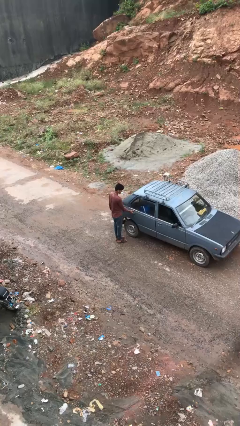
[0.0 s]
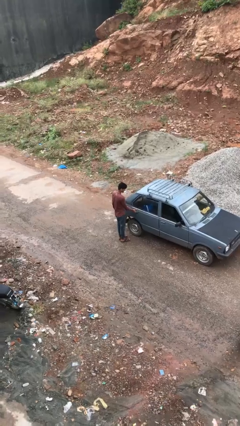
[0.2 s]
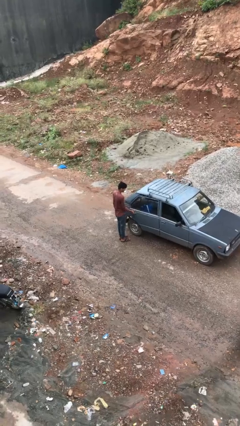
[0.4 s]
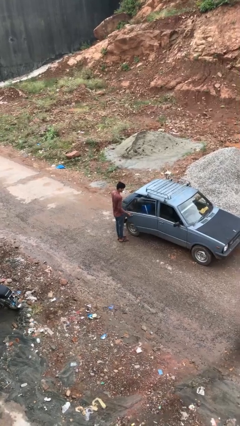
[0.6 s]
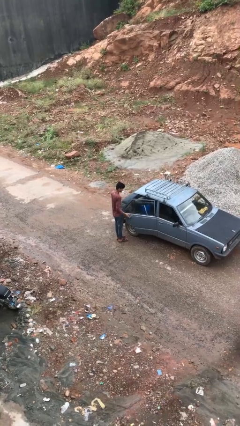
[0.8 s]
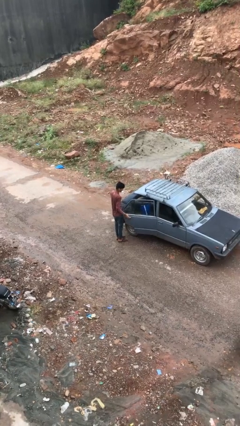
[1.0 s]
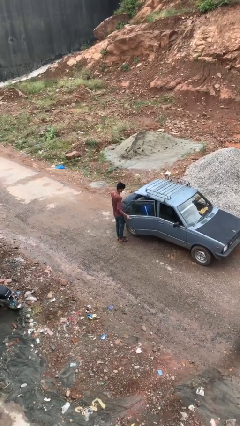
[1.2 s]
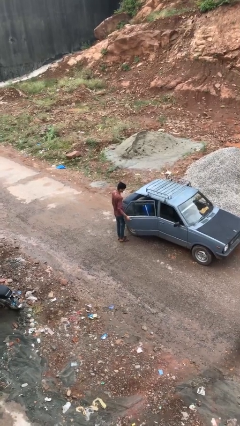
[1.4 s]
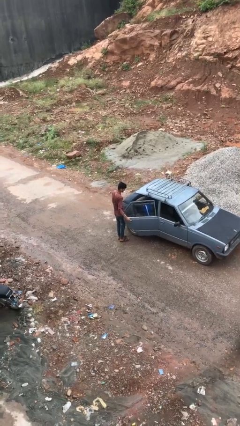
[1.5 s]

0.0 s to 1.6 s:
person opens car door

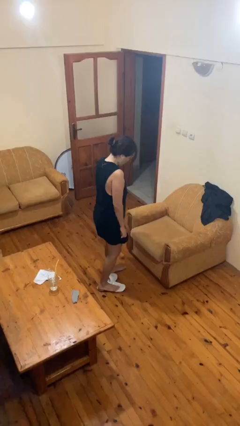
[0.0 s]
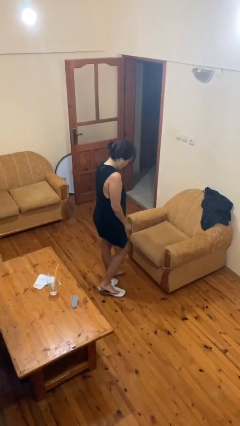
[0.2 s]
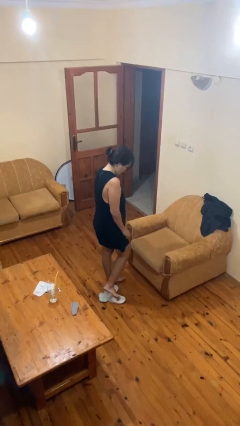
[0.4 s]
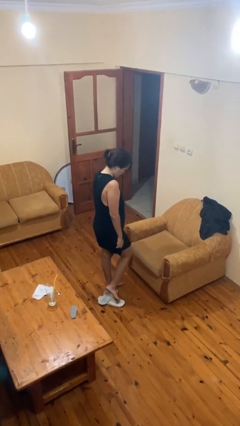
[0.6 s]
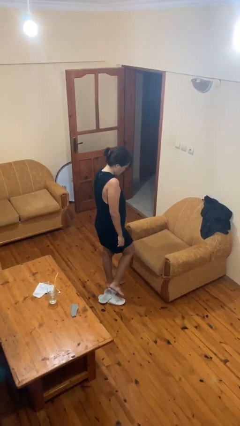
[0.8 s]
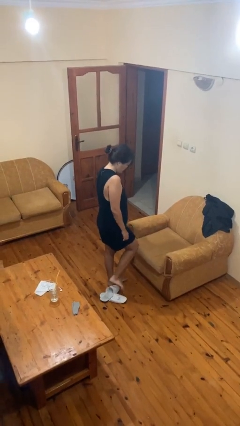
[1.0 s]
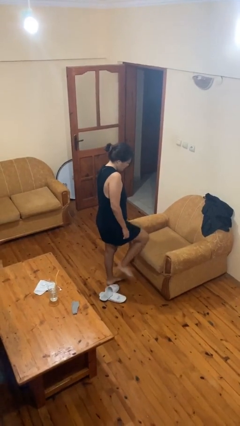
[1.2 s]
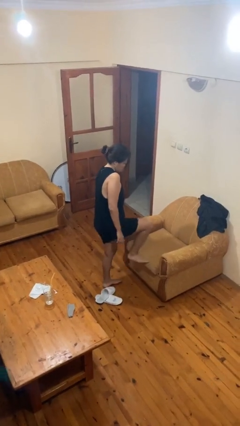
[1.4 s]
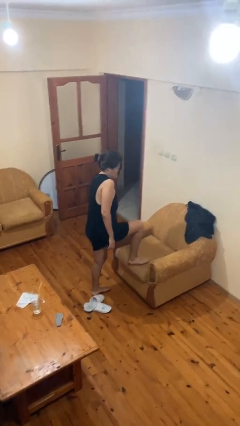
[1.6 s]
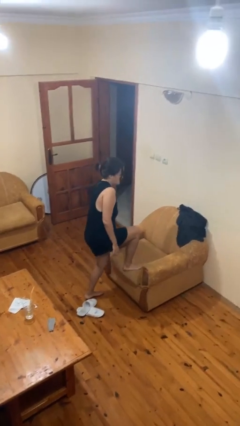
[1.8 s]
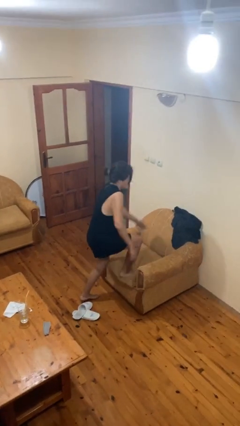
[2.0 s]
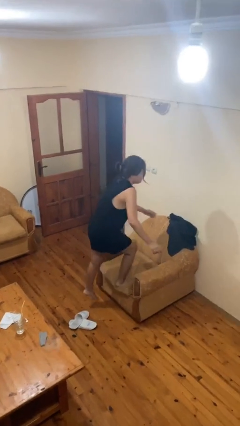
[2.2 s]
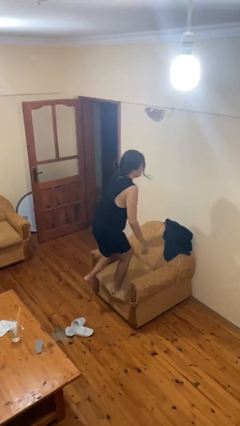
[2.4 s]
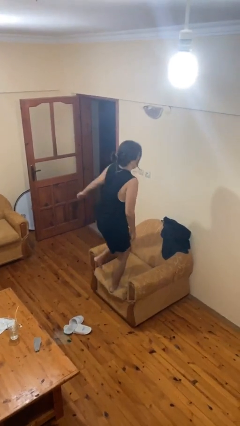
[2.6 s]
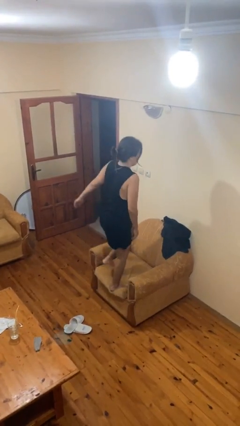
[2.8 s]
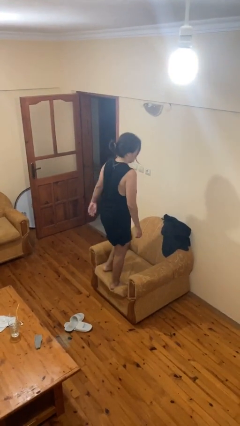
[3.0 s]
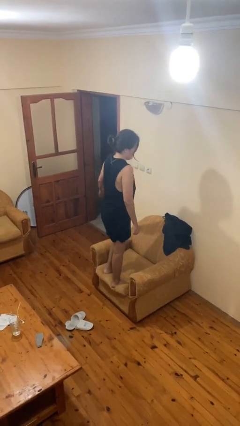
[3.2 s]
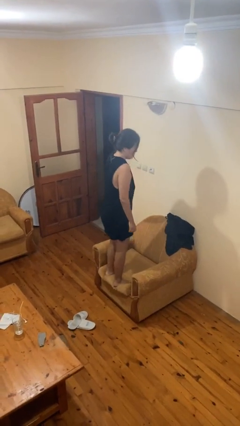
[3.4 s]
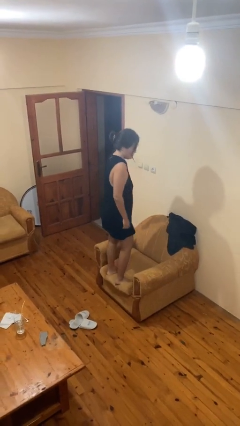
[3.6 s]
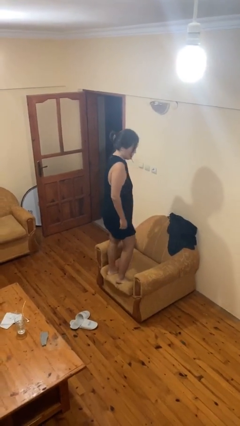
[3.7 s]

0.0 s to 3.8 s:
person climbs on chair

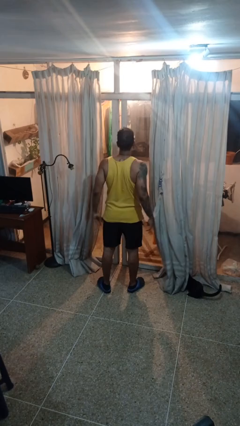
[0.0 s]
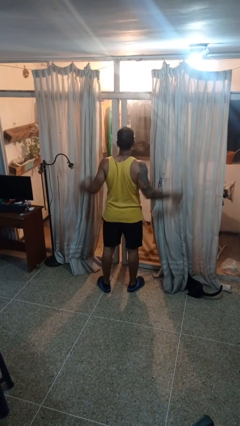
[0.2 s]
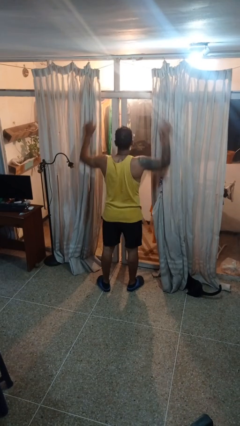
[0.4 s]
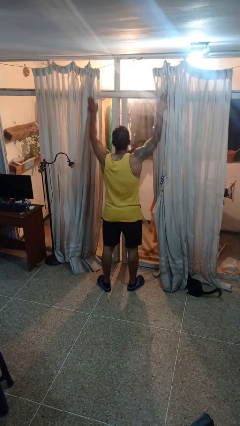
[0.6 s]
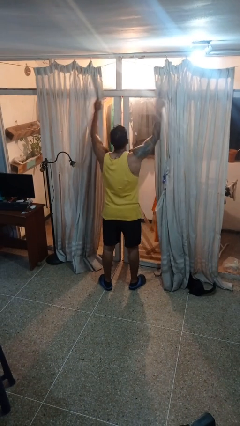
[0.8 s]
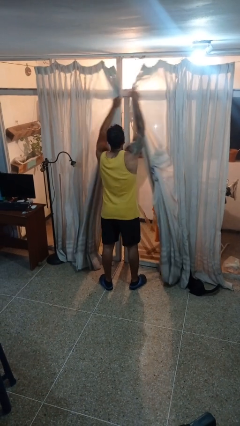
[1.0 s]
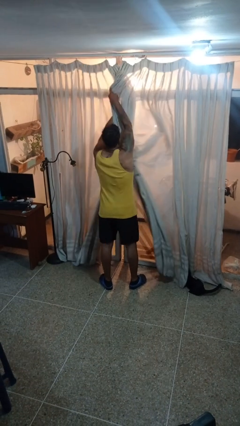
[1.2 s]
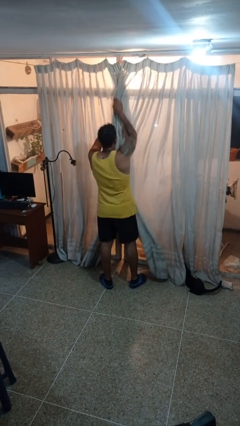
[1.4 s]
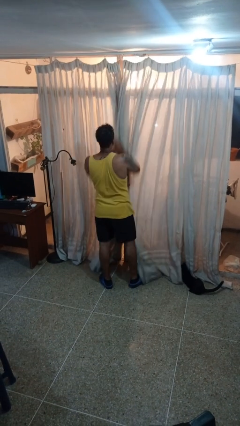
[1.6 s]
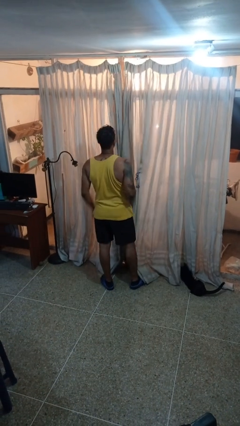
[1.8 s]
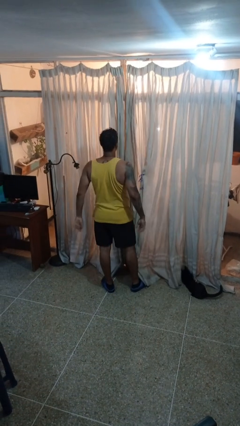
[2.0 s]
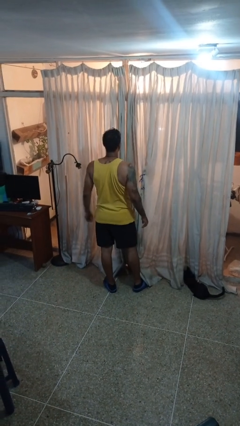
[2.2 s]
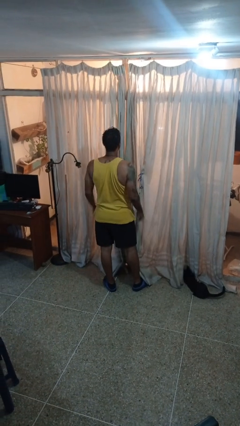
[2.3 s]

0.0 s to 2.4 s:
person closes curtains

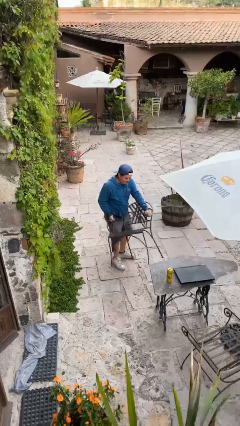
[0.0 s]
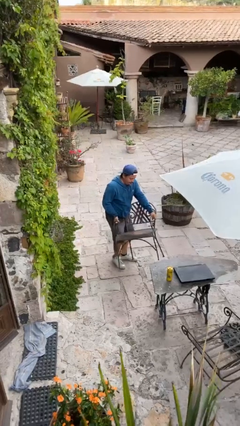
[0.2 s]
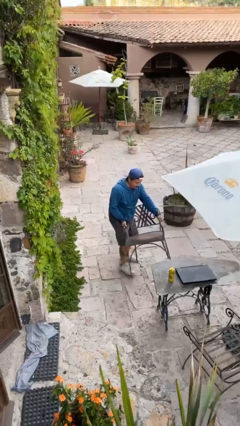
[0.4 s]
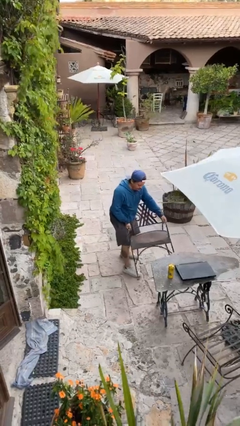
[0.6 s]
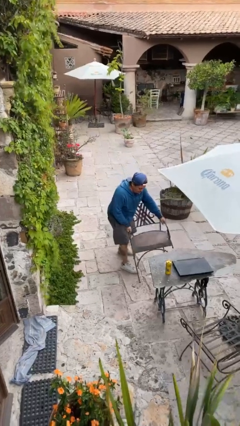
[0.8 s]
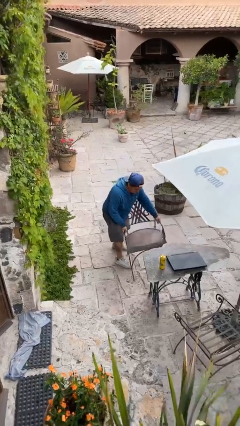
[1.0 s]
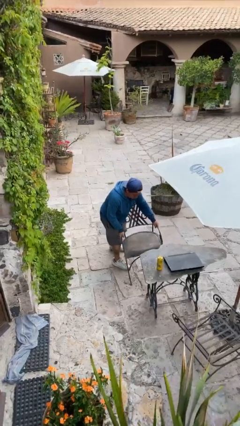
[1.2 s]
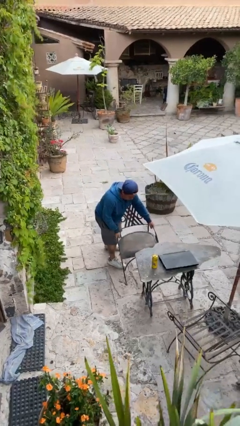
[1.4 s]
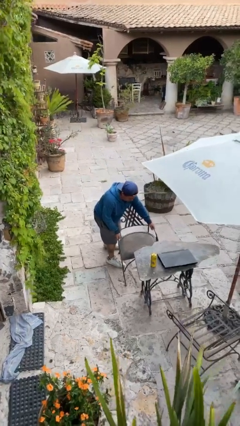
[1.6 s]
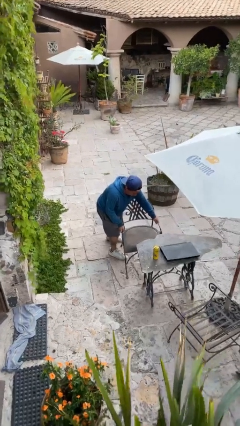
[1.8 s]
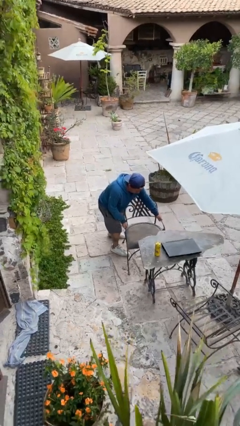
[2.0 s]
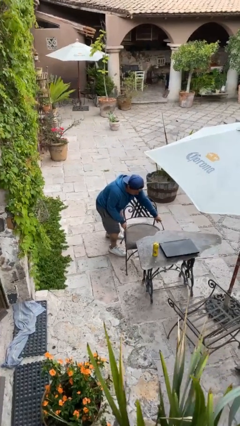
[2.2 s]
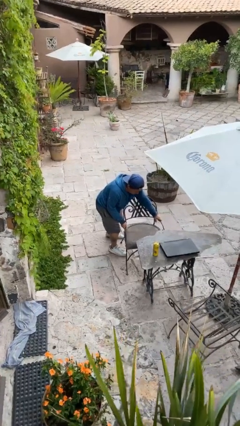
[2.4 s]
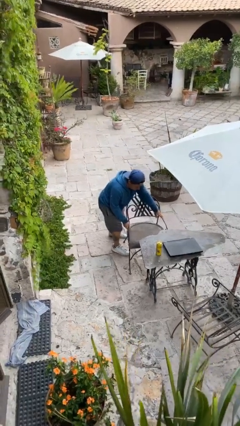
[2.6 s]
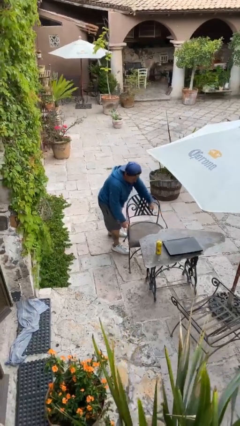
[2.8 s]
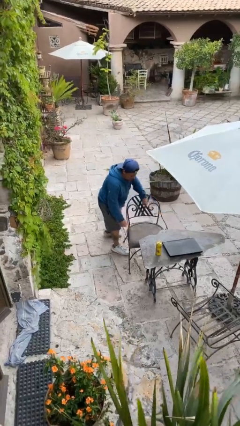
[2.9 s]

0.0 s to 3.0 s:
person puts down object on floor

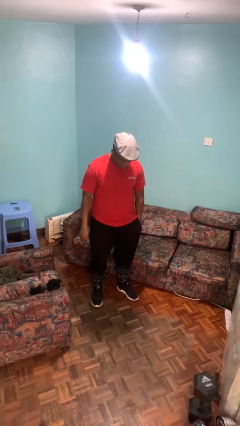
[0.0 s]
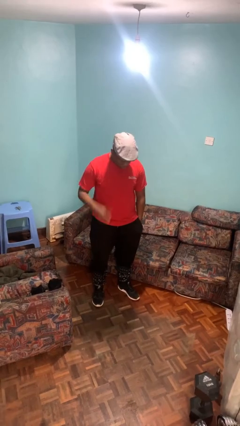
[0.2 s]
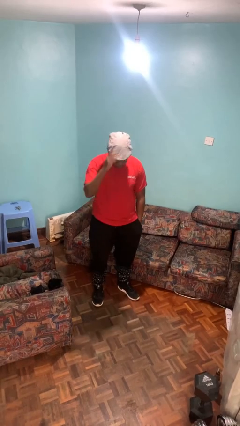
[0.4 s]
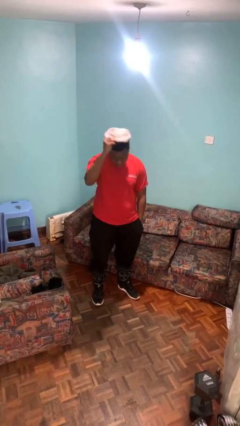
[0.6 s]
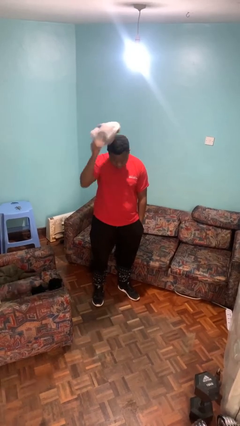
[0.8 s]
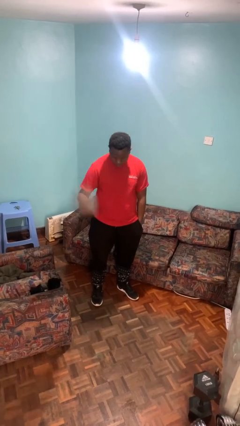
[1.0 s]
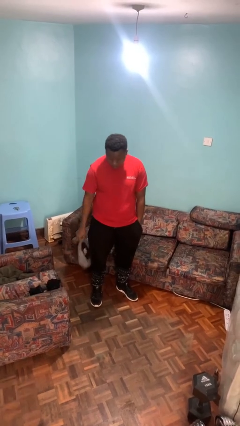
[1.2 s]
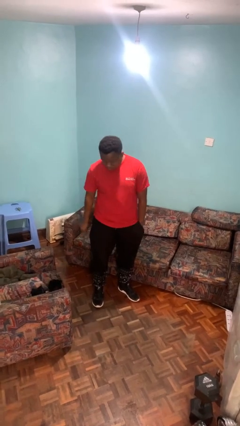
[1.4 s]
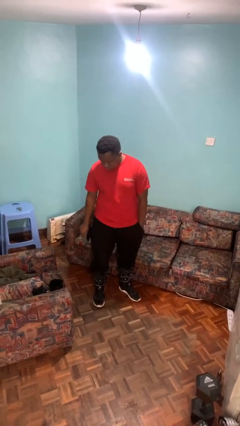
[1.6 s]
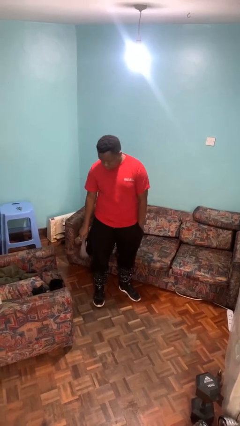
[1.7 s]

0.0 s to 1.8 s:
person takes off hat

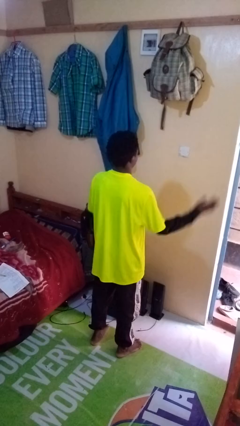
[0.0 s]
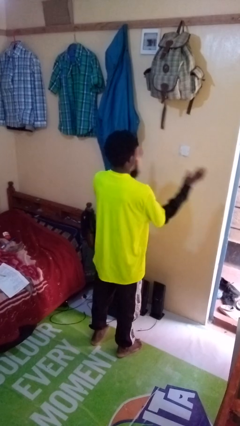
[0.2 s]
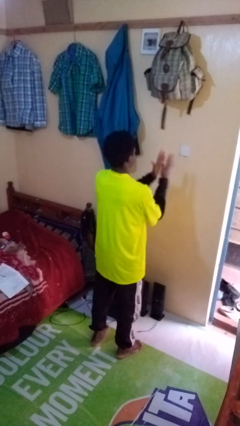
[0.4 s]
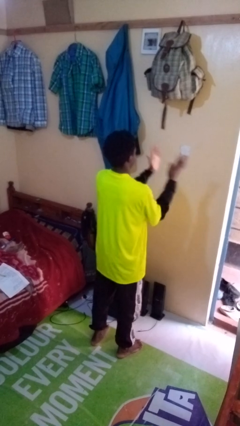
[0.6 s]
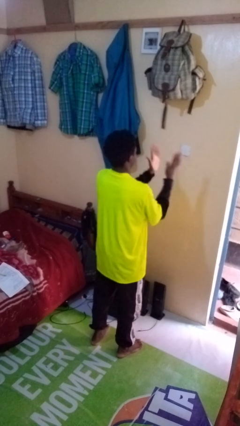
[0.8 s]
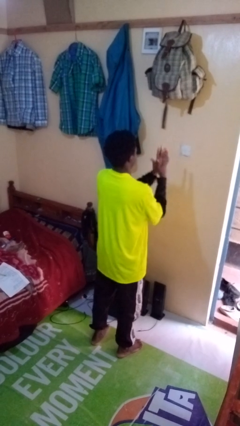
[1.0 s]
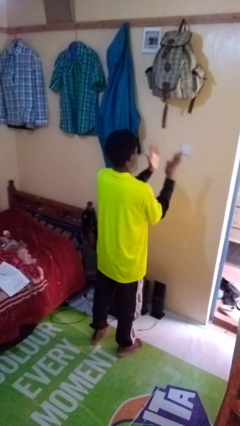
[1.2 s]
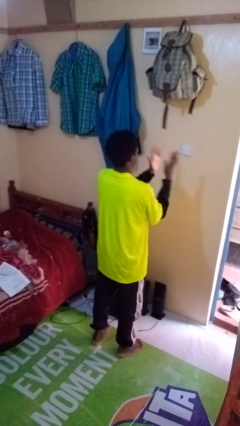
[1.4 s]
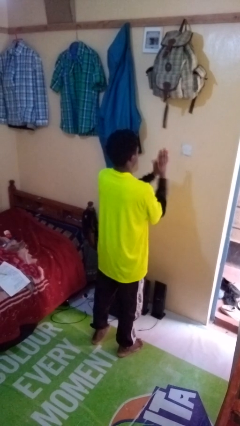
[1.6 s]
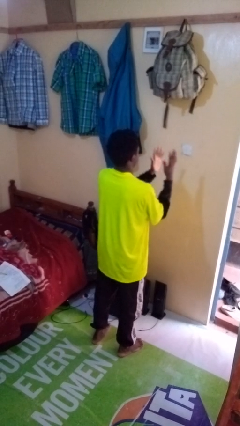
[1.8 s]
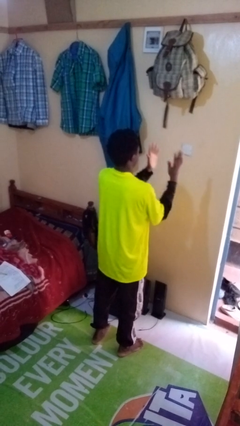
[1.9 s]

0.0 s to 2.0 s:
person claps hands

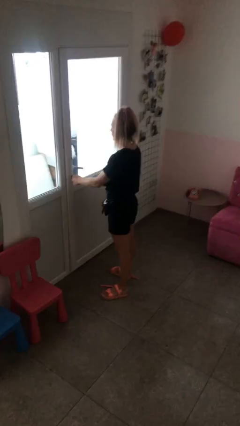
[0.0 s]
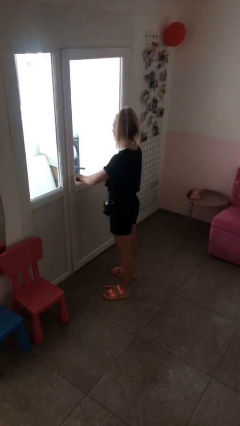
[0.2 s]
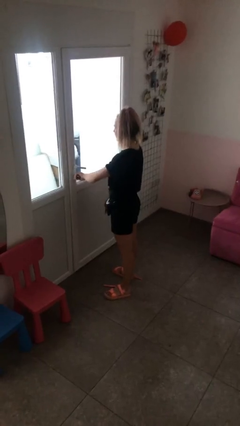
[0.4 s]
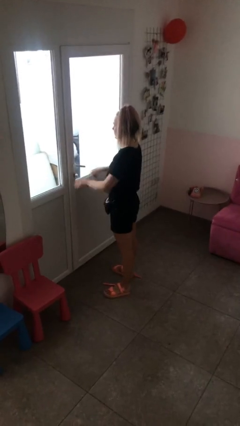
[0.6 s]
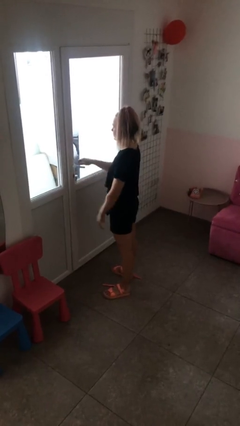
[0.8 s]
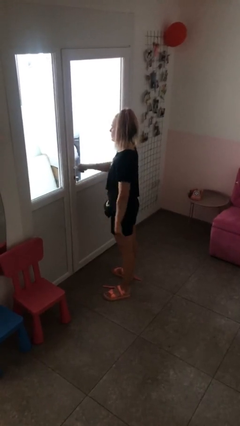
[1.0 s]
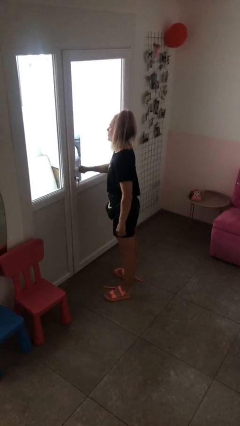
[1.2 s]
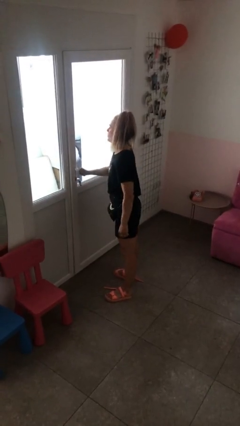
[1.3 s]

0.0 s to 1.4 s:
person unlocks door with keys

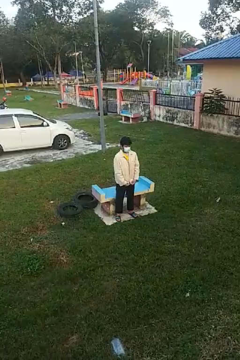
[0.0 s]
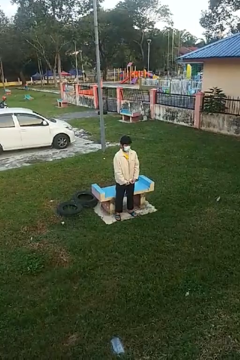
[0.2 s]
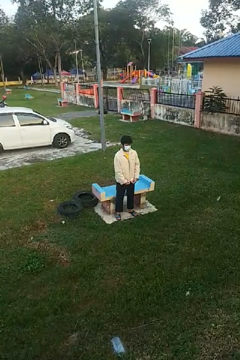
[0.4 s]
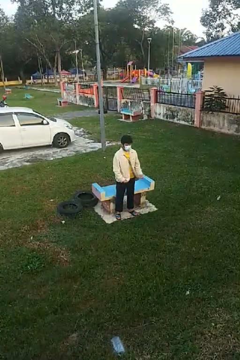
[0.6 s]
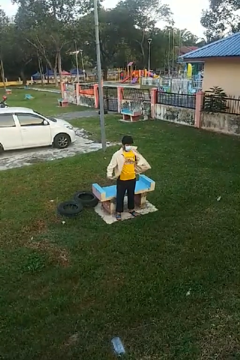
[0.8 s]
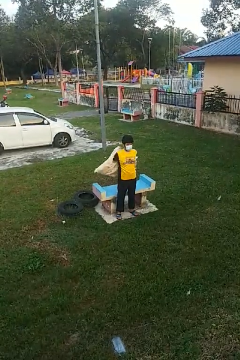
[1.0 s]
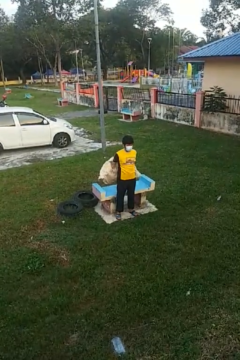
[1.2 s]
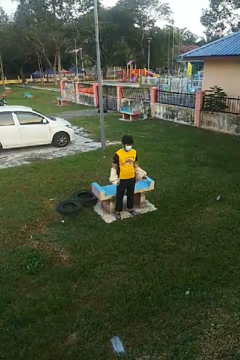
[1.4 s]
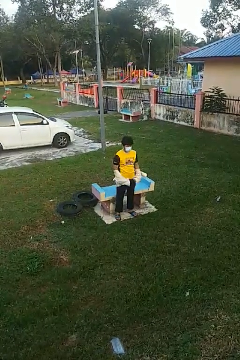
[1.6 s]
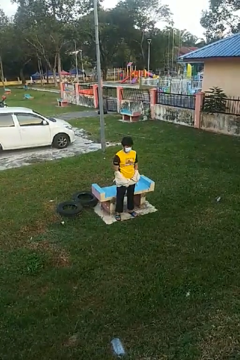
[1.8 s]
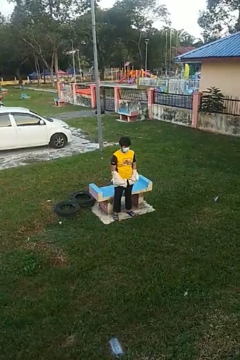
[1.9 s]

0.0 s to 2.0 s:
person takes off jacket
